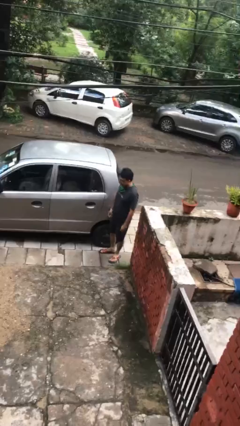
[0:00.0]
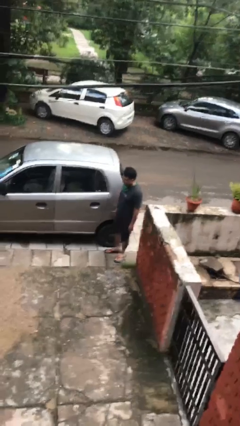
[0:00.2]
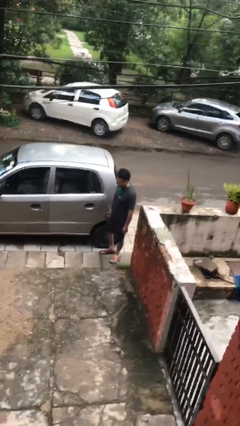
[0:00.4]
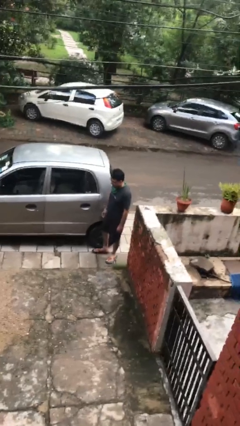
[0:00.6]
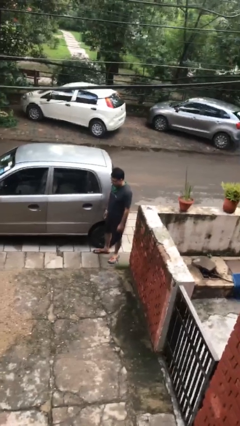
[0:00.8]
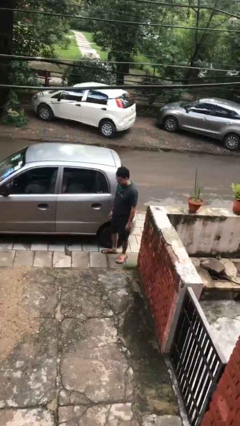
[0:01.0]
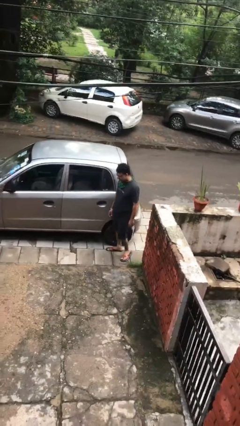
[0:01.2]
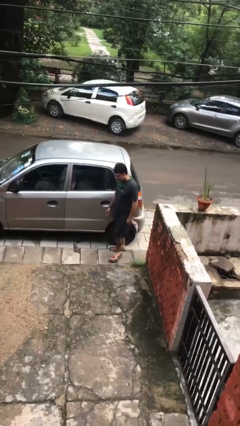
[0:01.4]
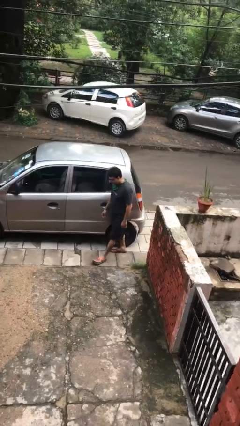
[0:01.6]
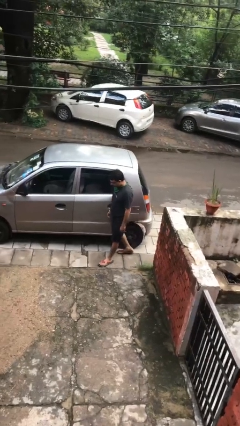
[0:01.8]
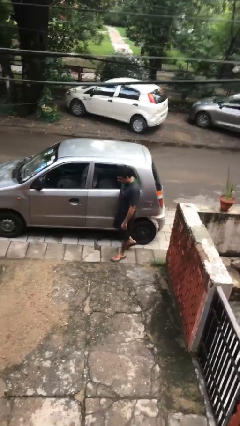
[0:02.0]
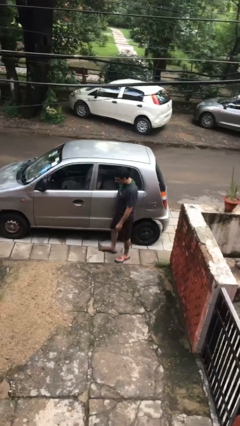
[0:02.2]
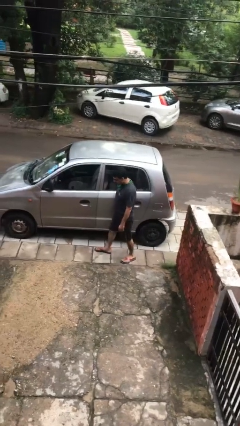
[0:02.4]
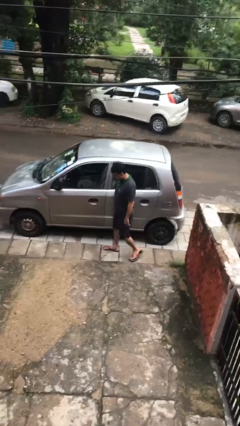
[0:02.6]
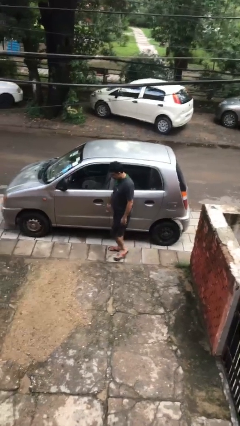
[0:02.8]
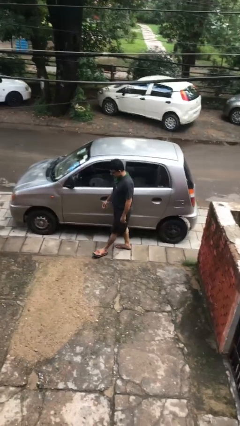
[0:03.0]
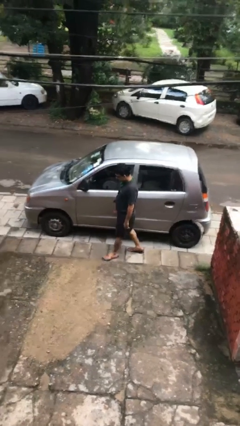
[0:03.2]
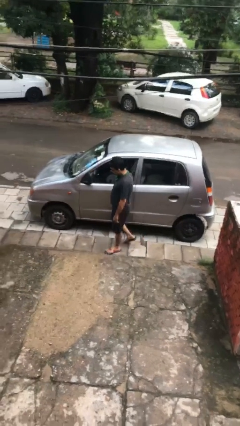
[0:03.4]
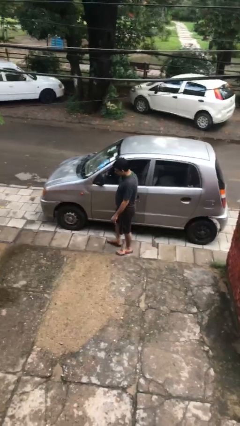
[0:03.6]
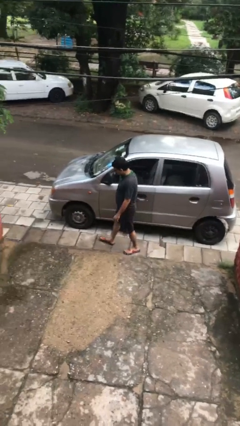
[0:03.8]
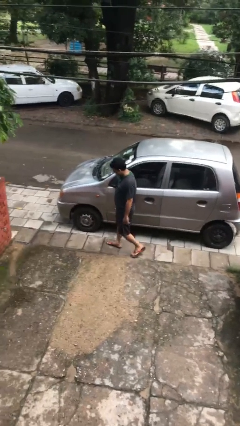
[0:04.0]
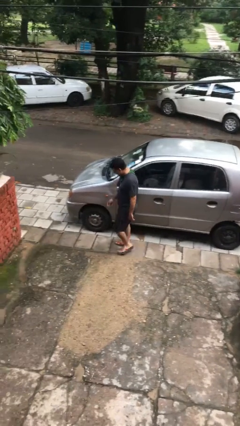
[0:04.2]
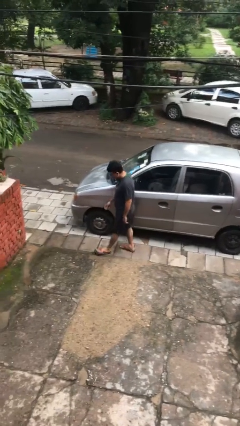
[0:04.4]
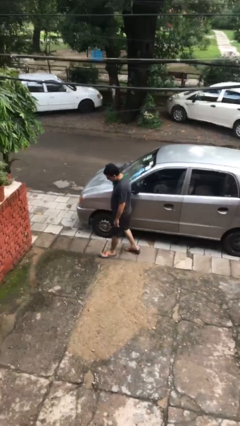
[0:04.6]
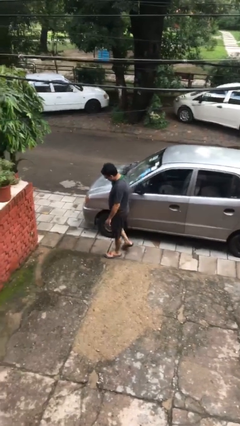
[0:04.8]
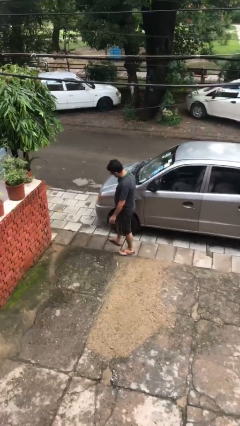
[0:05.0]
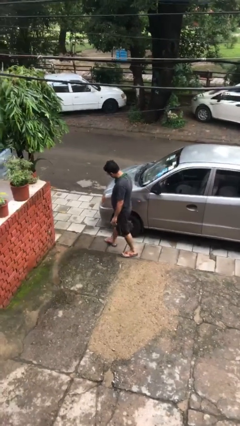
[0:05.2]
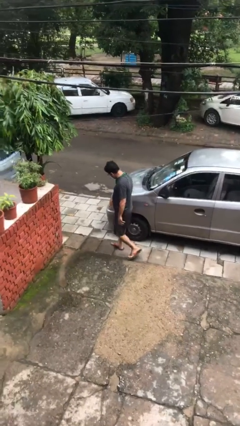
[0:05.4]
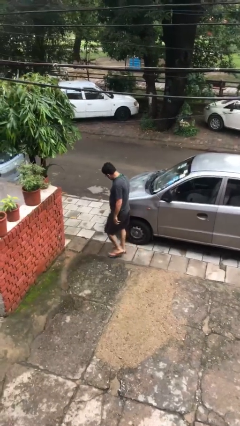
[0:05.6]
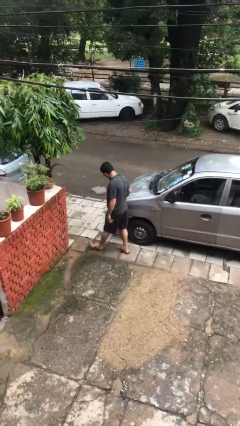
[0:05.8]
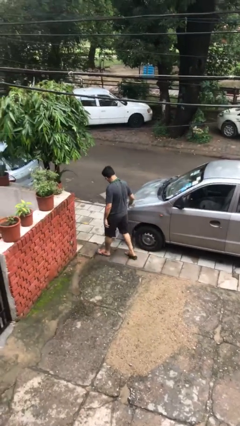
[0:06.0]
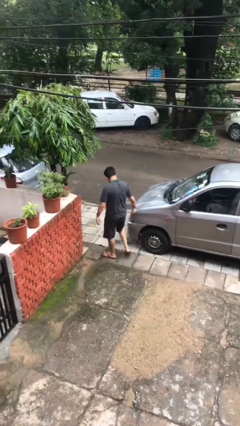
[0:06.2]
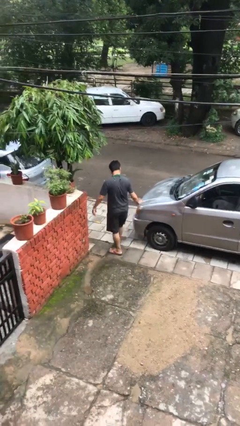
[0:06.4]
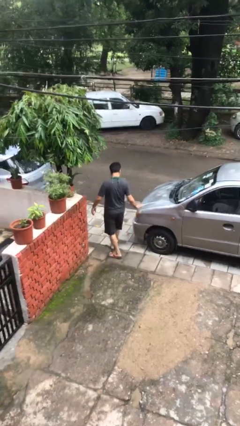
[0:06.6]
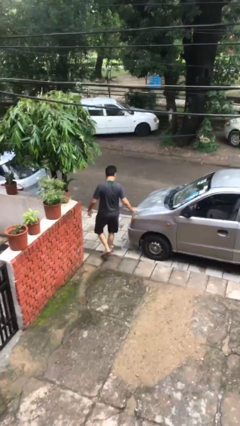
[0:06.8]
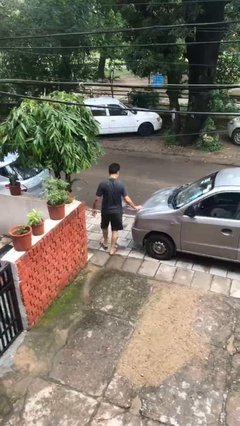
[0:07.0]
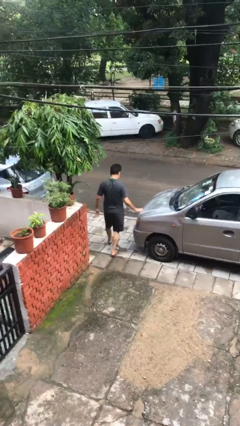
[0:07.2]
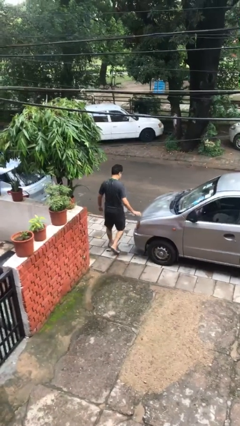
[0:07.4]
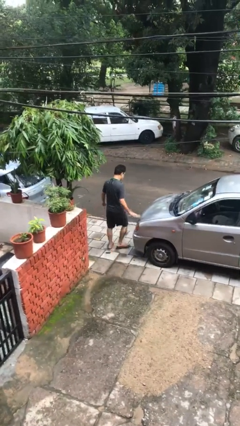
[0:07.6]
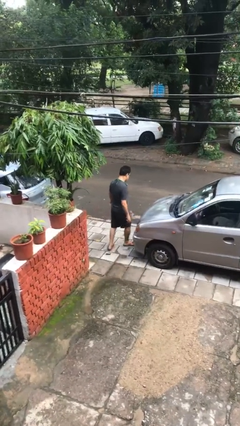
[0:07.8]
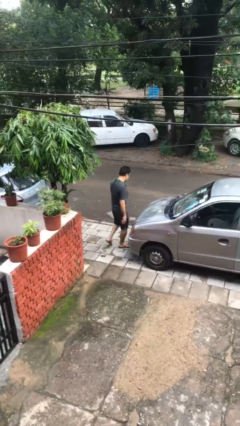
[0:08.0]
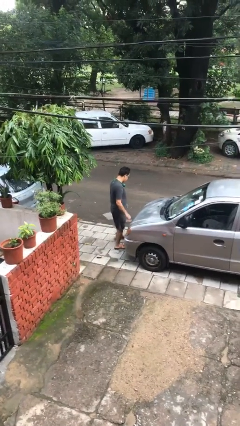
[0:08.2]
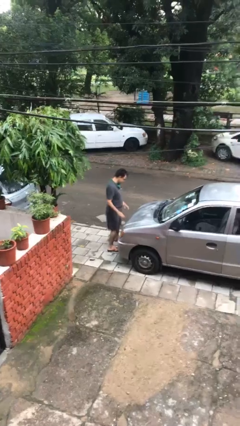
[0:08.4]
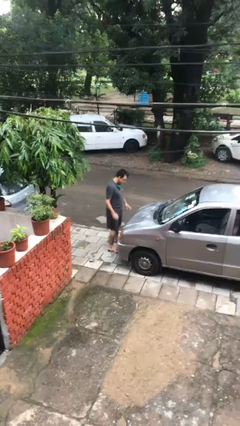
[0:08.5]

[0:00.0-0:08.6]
person walks around car

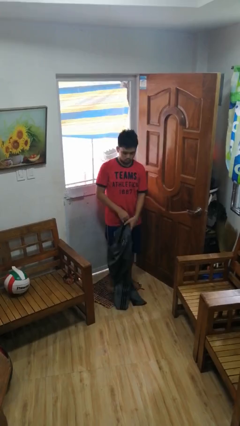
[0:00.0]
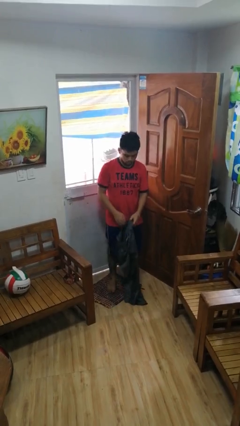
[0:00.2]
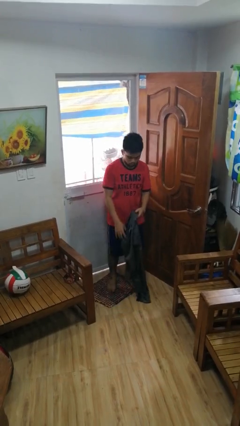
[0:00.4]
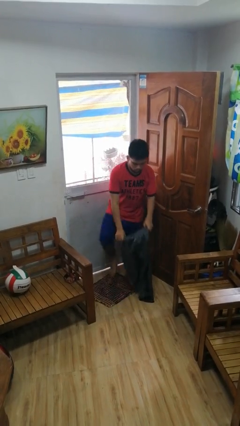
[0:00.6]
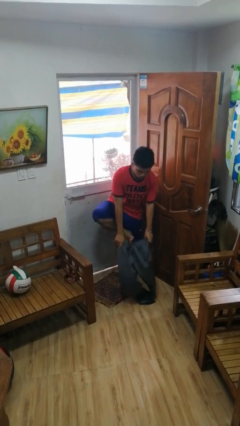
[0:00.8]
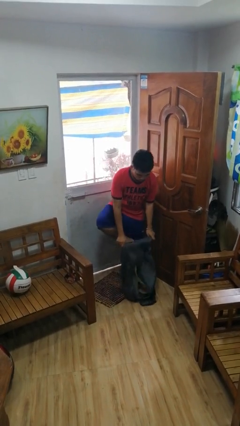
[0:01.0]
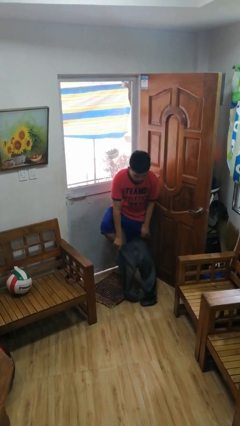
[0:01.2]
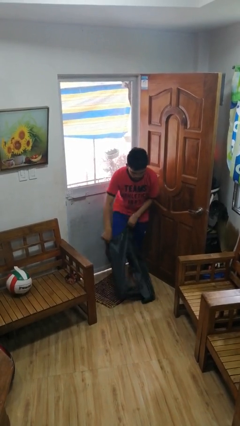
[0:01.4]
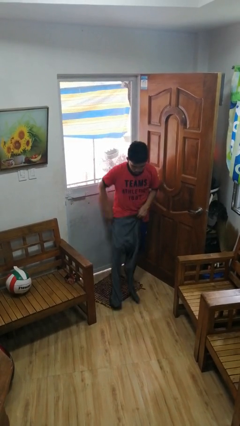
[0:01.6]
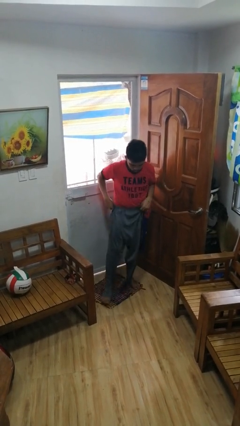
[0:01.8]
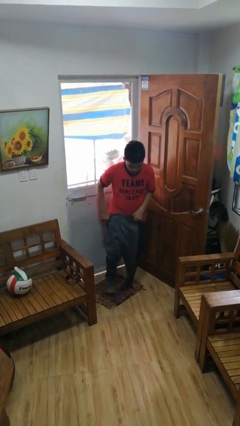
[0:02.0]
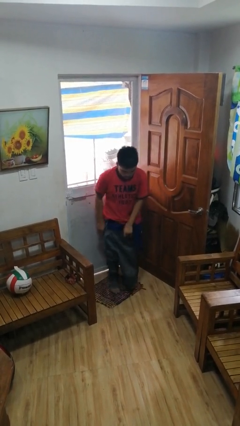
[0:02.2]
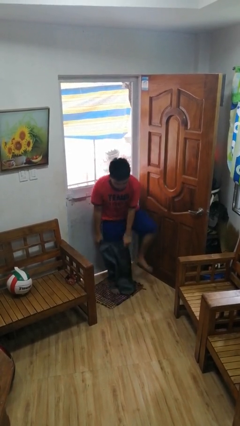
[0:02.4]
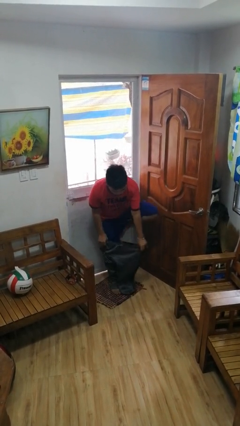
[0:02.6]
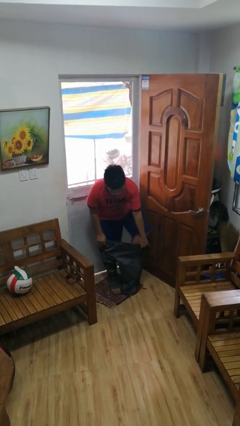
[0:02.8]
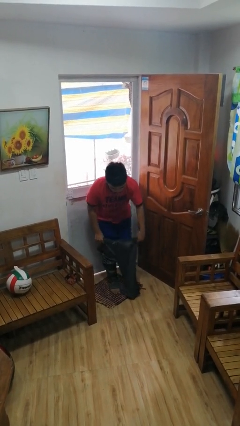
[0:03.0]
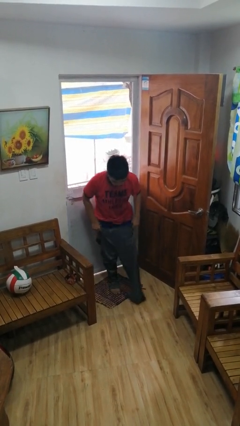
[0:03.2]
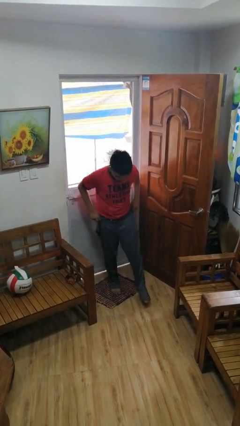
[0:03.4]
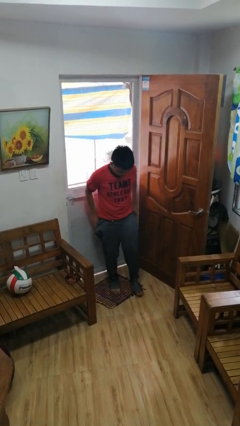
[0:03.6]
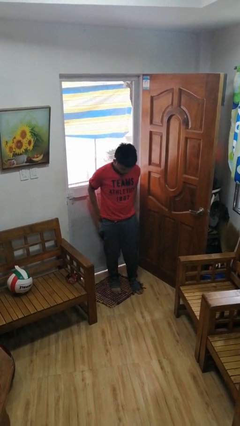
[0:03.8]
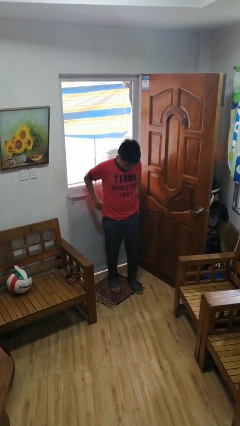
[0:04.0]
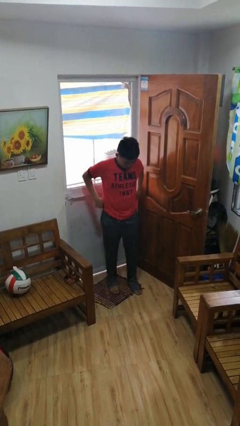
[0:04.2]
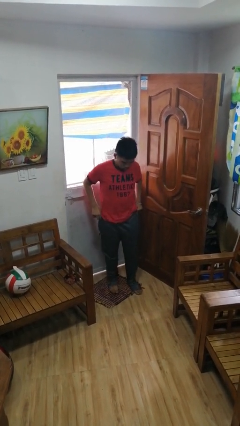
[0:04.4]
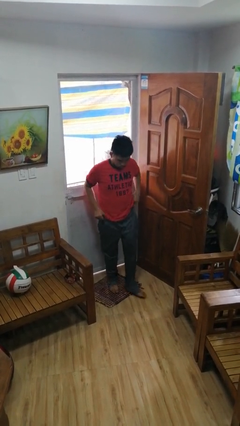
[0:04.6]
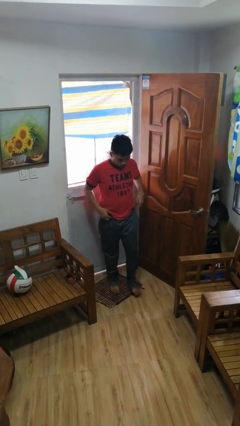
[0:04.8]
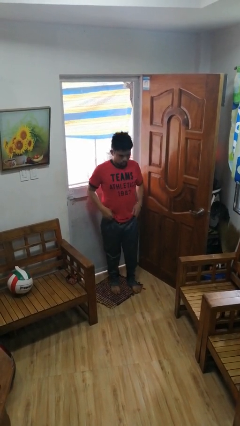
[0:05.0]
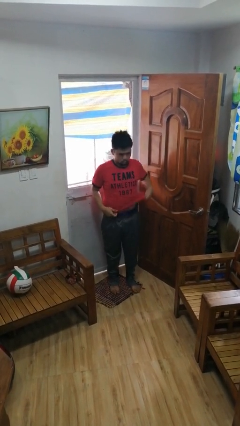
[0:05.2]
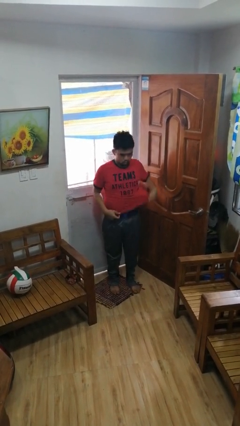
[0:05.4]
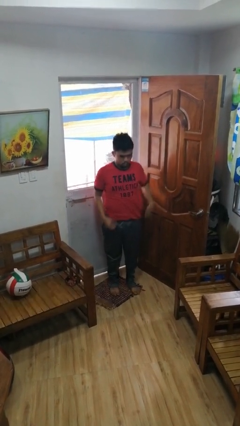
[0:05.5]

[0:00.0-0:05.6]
person puts on pants

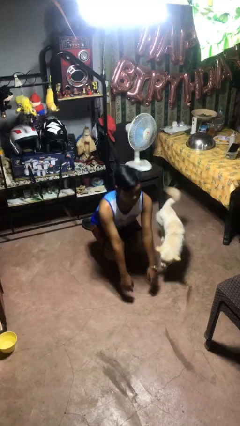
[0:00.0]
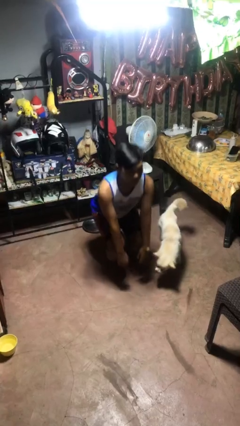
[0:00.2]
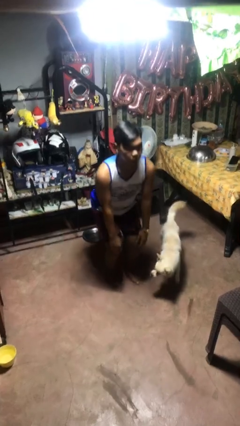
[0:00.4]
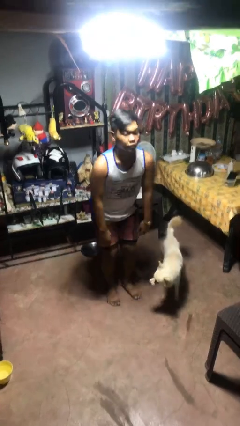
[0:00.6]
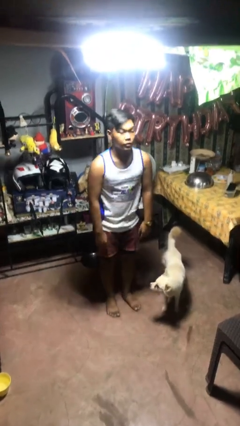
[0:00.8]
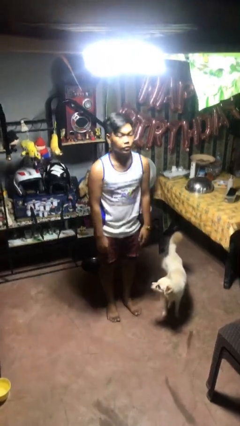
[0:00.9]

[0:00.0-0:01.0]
person stands up

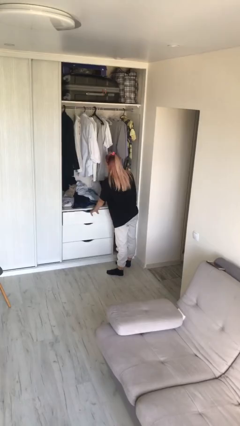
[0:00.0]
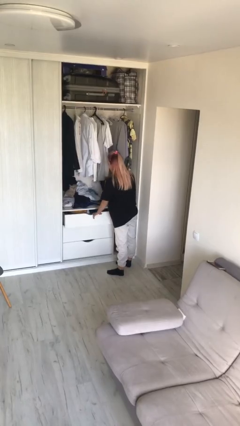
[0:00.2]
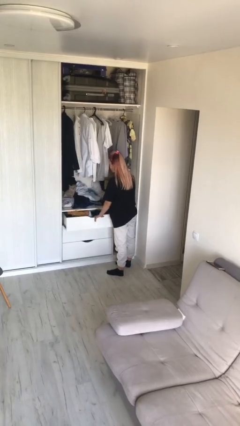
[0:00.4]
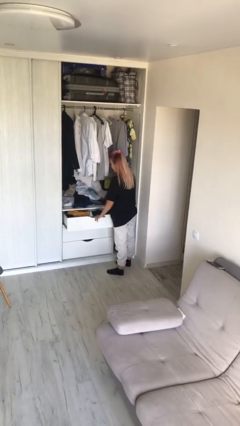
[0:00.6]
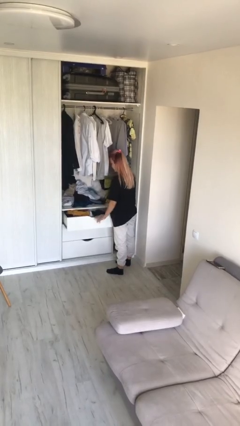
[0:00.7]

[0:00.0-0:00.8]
person opens dresser drawer

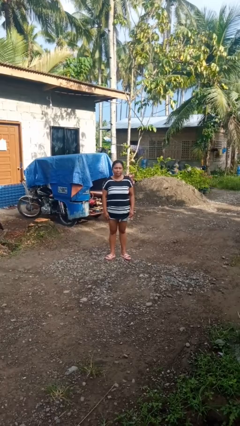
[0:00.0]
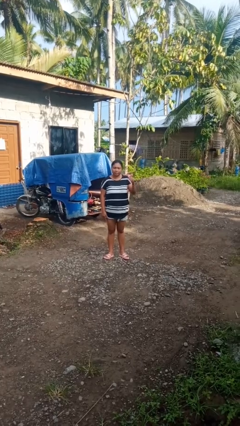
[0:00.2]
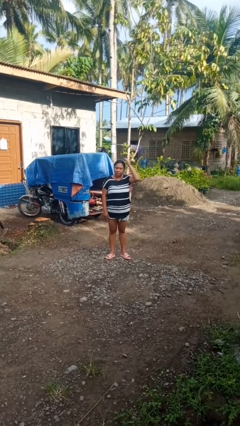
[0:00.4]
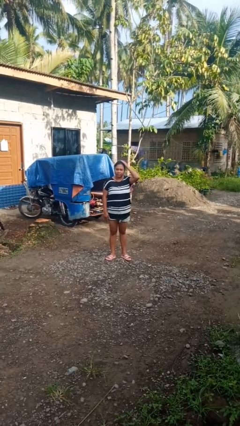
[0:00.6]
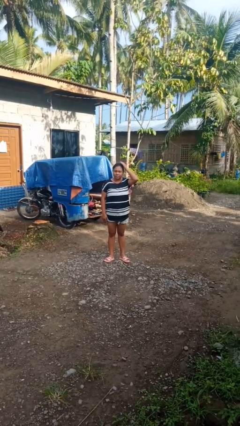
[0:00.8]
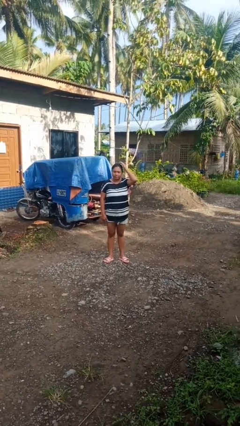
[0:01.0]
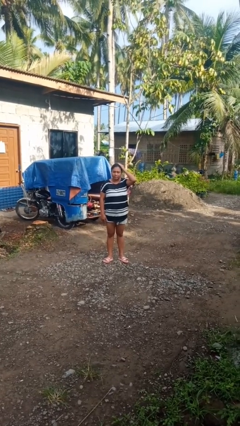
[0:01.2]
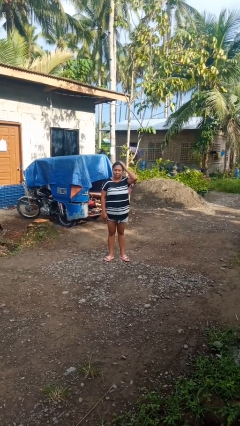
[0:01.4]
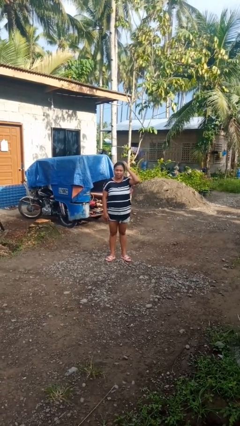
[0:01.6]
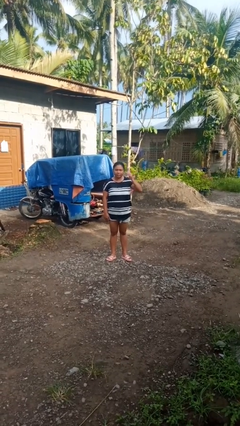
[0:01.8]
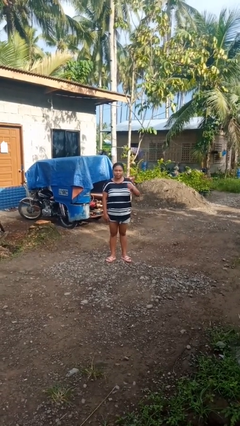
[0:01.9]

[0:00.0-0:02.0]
person pats head
